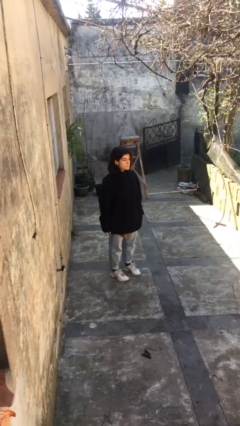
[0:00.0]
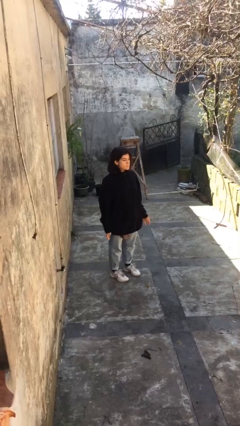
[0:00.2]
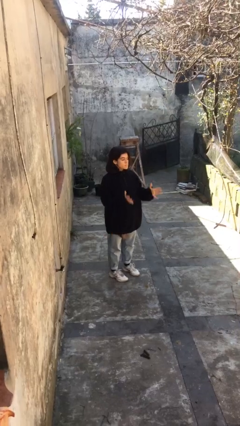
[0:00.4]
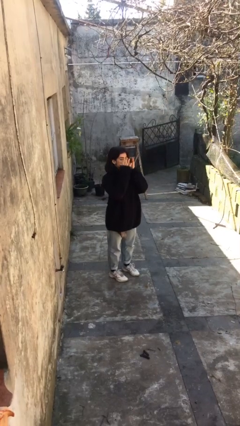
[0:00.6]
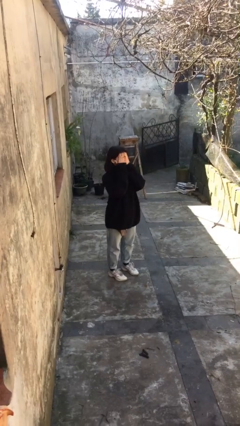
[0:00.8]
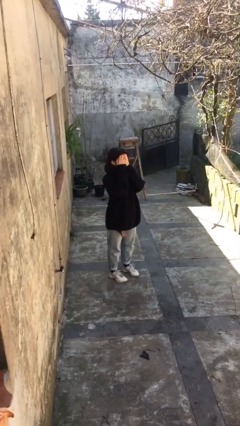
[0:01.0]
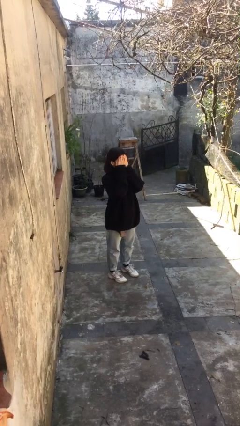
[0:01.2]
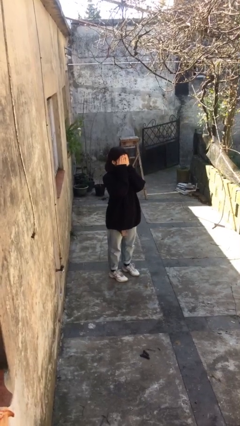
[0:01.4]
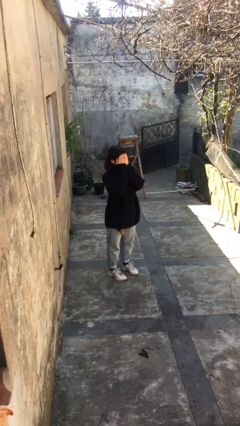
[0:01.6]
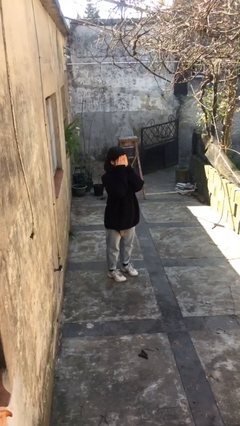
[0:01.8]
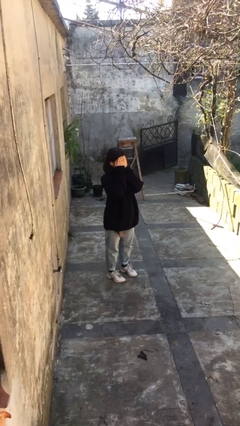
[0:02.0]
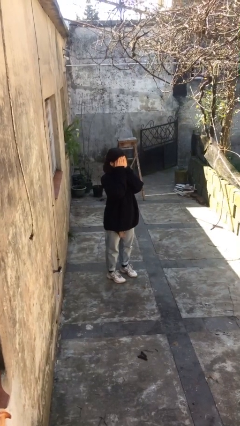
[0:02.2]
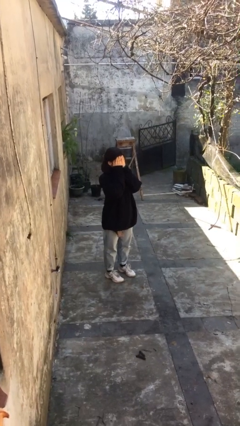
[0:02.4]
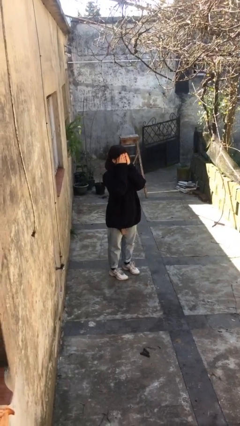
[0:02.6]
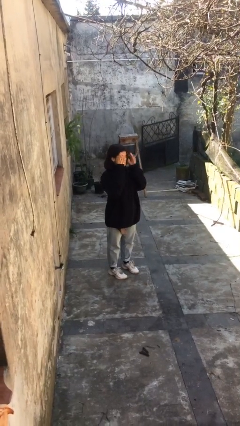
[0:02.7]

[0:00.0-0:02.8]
person covers face with hands

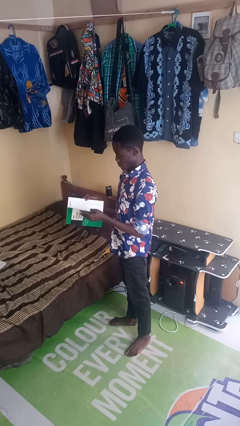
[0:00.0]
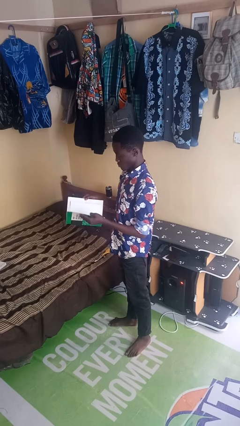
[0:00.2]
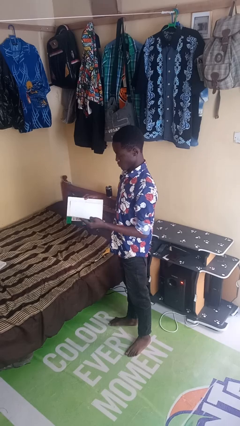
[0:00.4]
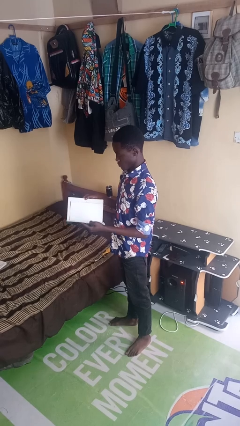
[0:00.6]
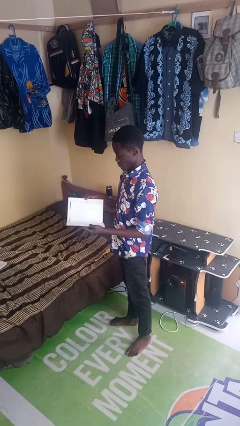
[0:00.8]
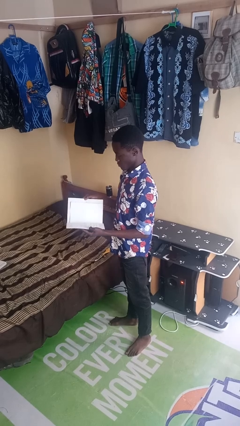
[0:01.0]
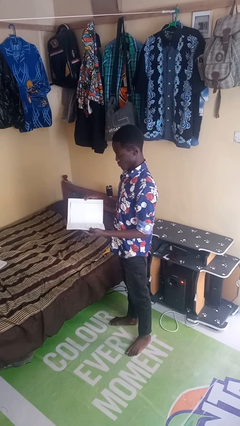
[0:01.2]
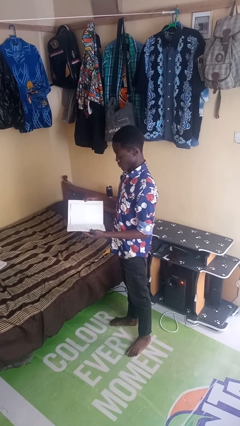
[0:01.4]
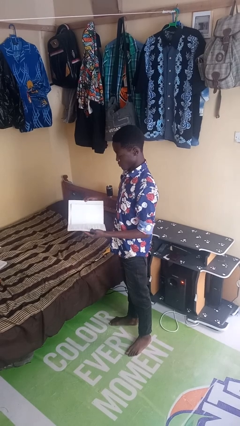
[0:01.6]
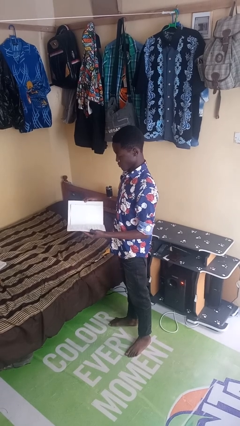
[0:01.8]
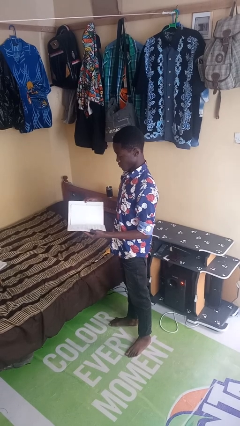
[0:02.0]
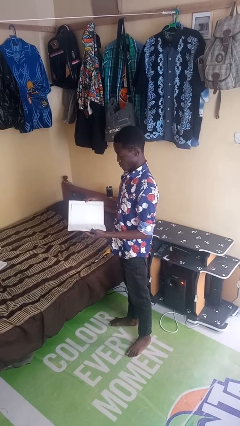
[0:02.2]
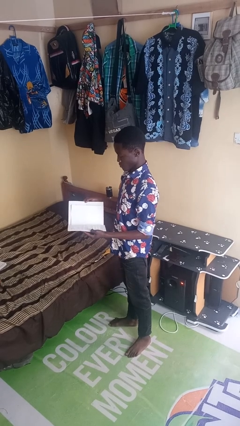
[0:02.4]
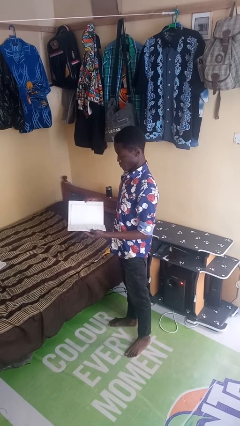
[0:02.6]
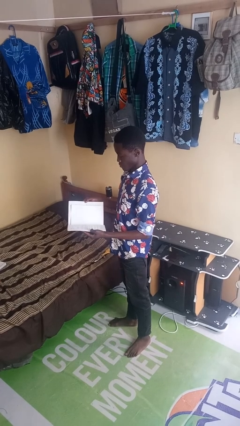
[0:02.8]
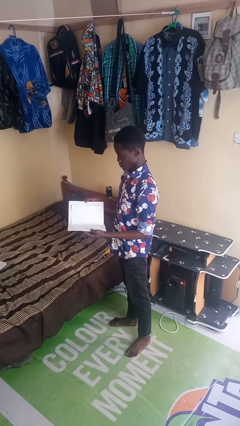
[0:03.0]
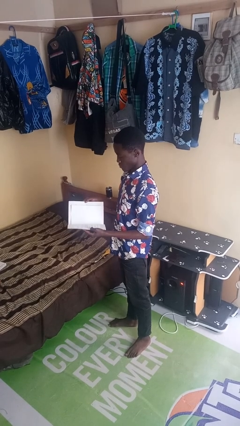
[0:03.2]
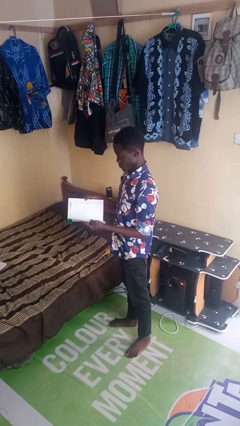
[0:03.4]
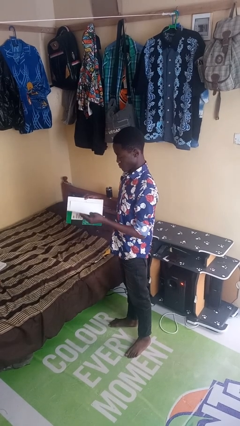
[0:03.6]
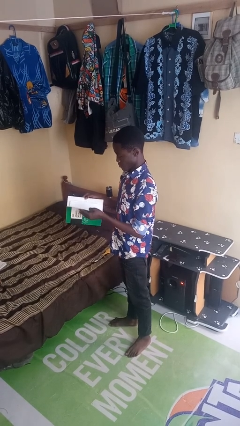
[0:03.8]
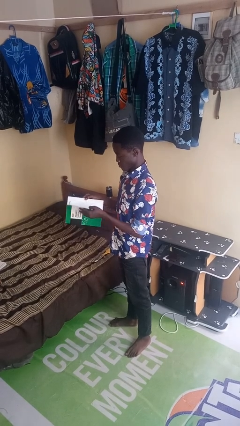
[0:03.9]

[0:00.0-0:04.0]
person reads magazine

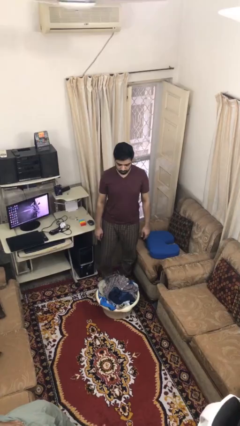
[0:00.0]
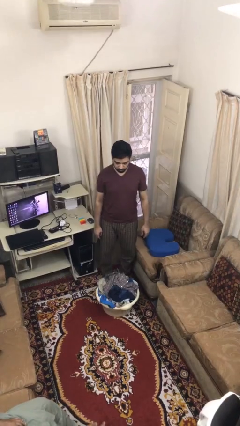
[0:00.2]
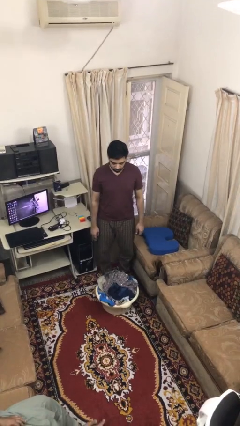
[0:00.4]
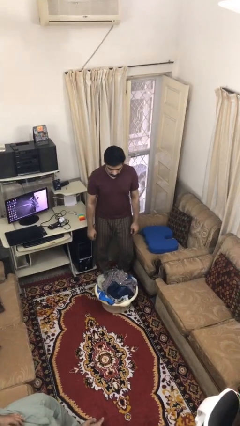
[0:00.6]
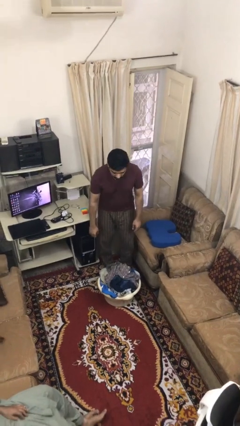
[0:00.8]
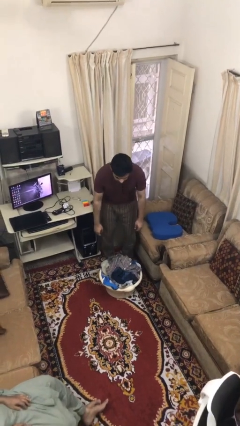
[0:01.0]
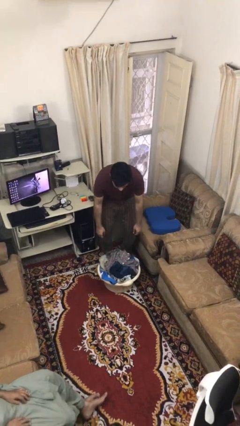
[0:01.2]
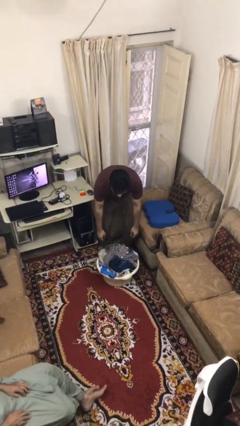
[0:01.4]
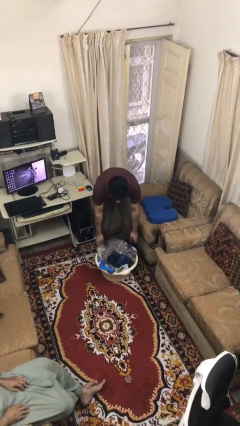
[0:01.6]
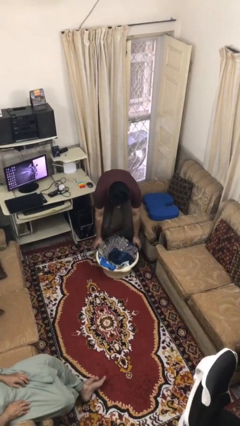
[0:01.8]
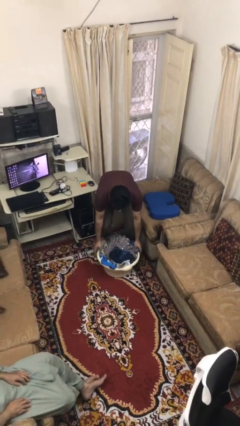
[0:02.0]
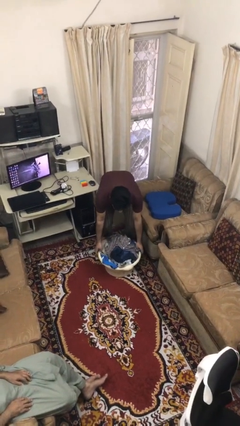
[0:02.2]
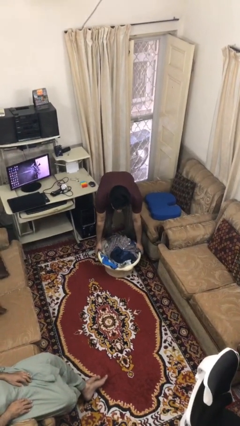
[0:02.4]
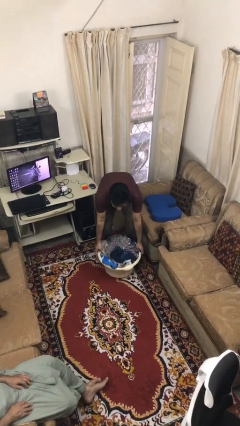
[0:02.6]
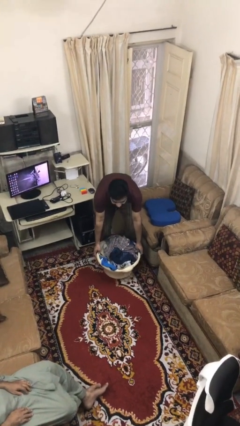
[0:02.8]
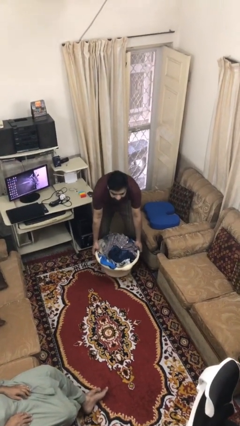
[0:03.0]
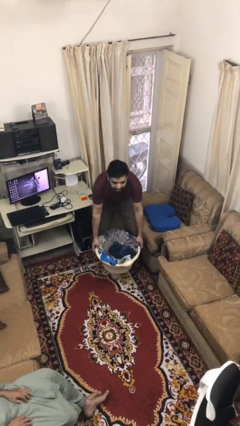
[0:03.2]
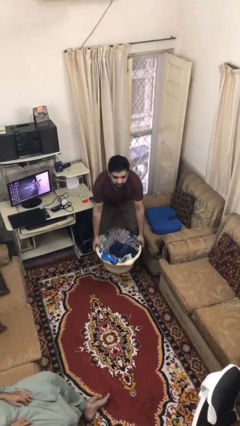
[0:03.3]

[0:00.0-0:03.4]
person picks up object from floor

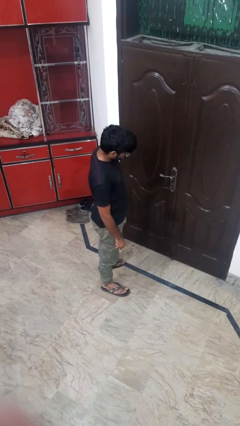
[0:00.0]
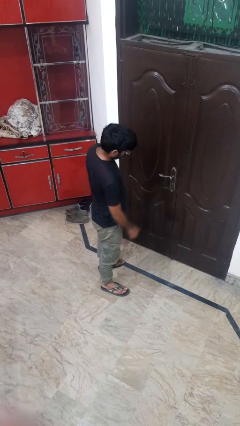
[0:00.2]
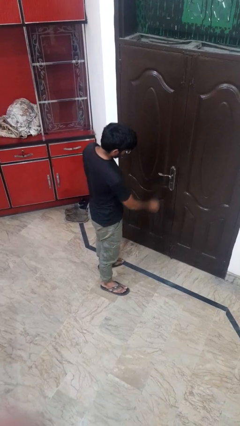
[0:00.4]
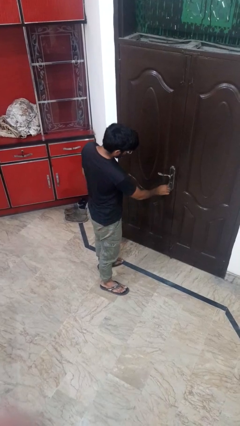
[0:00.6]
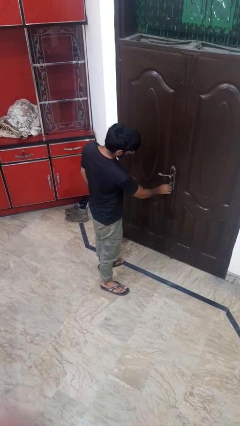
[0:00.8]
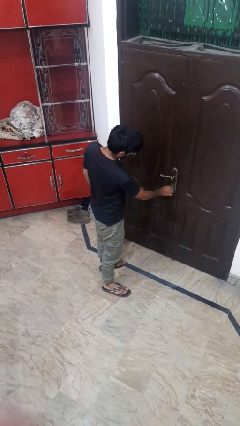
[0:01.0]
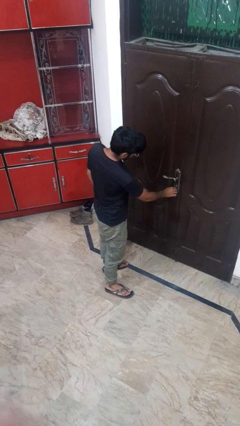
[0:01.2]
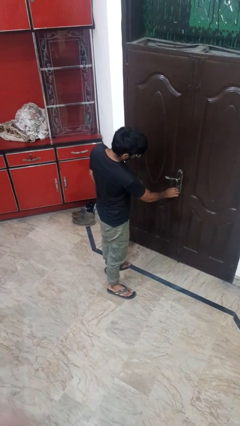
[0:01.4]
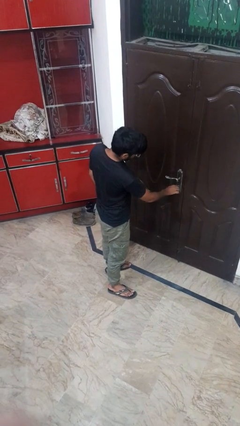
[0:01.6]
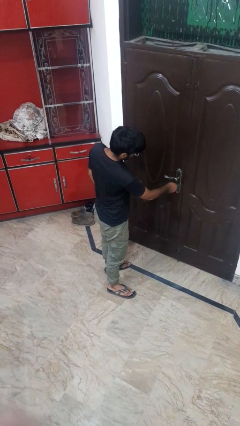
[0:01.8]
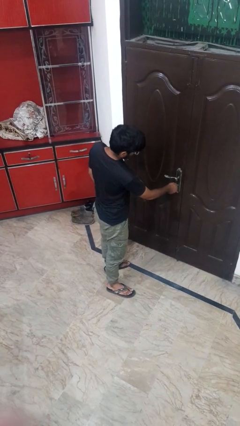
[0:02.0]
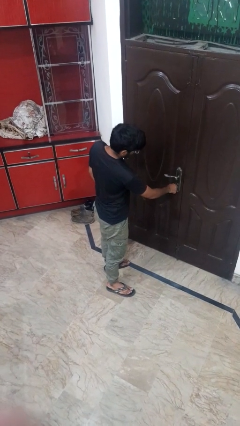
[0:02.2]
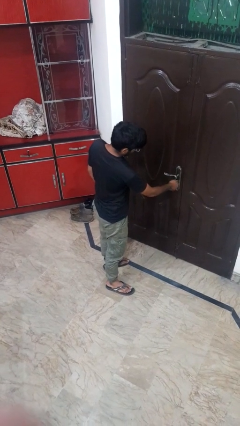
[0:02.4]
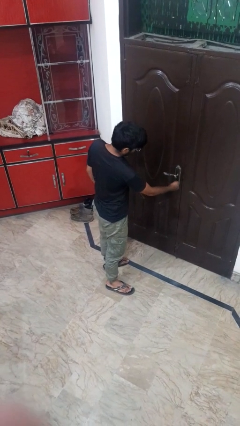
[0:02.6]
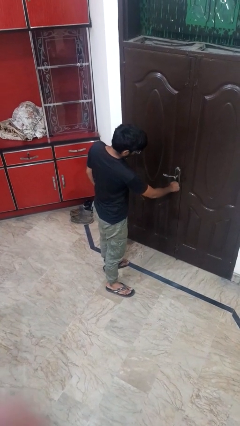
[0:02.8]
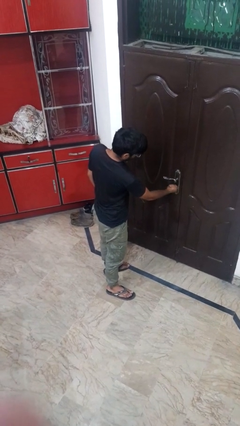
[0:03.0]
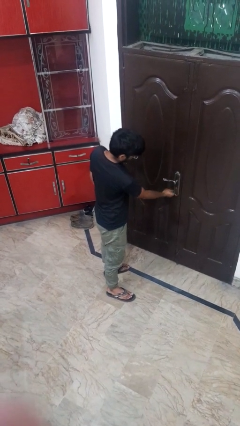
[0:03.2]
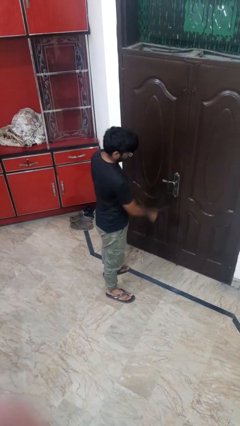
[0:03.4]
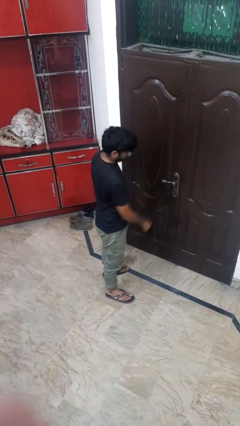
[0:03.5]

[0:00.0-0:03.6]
person locks door with keys

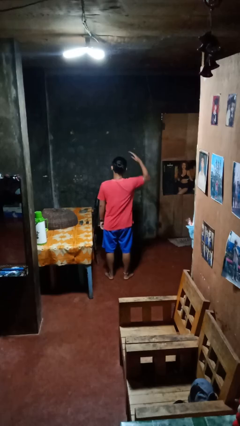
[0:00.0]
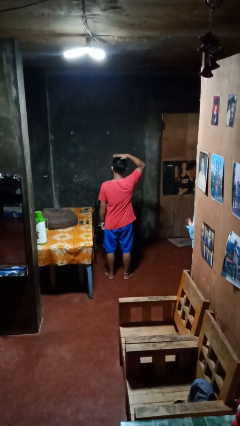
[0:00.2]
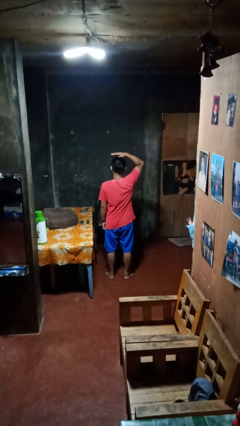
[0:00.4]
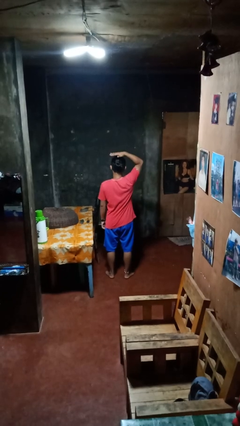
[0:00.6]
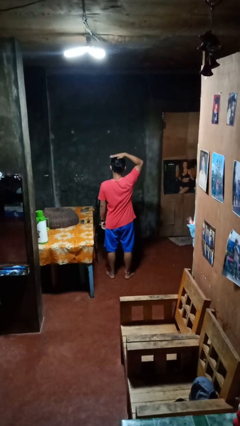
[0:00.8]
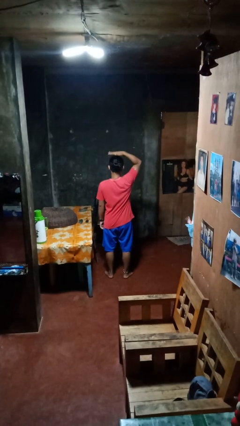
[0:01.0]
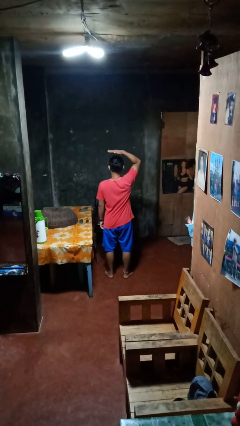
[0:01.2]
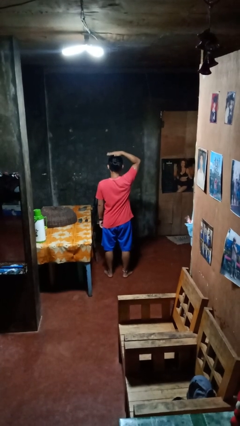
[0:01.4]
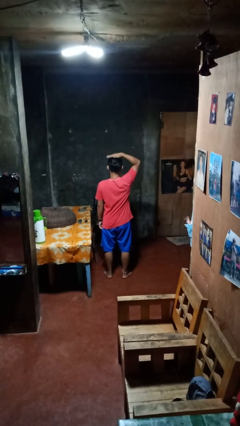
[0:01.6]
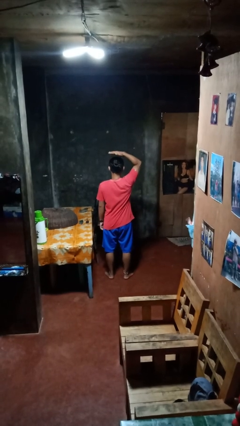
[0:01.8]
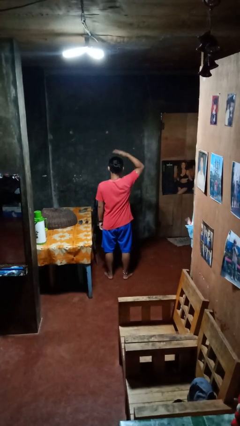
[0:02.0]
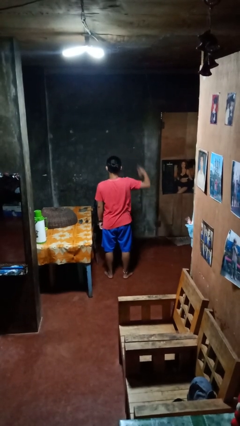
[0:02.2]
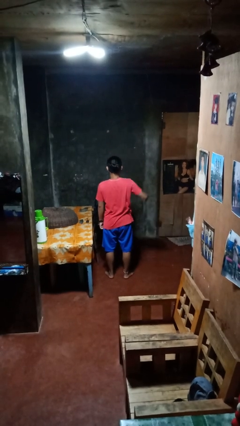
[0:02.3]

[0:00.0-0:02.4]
person pats head

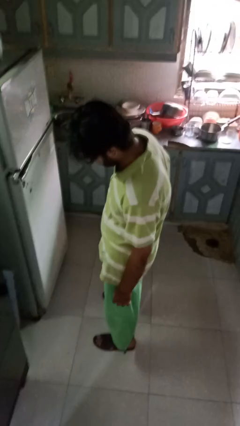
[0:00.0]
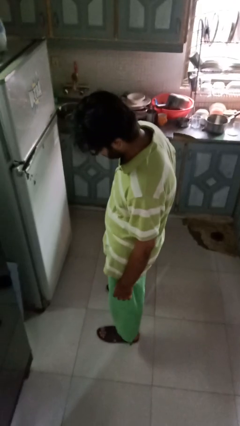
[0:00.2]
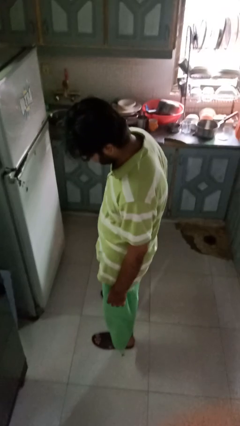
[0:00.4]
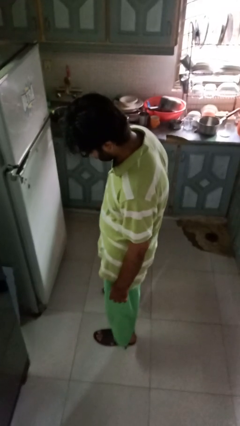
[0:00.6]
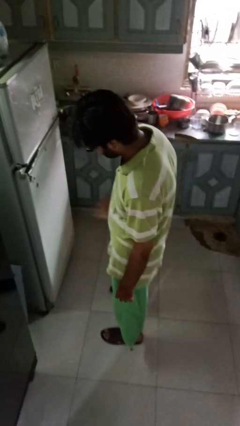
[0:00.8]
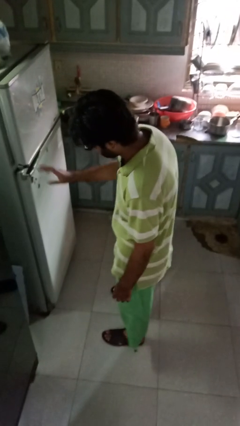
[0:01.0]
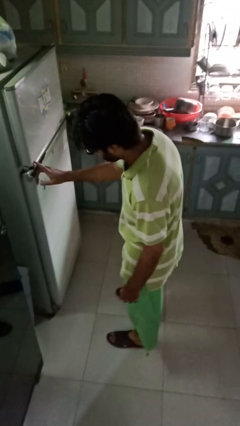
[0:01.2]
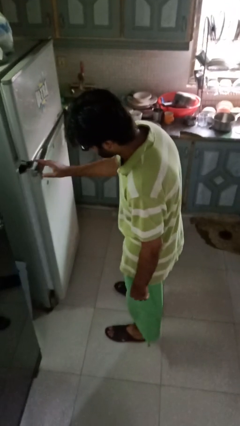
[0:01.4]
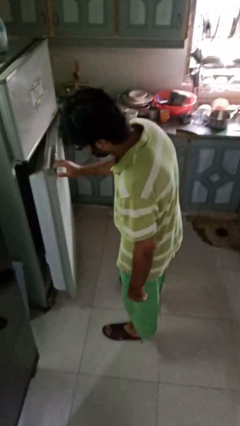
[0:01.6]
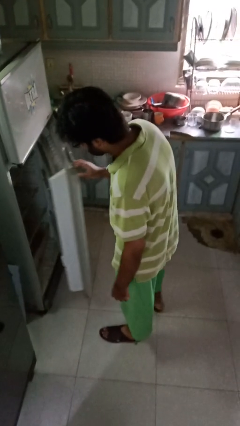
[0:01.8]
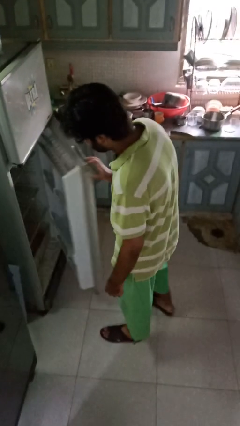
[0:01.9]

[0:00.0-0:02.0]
person opens refrigerator
